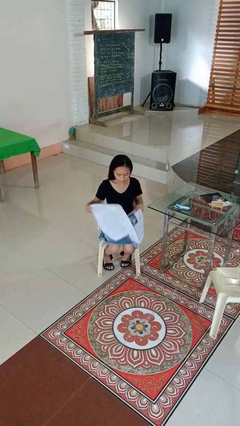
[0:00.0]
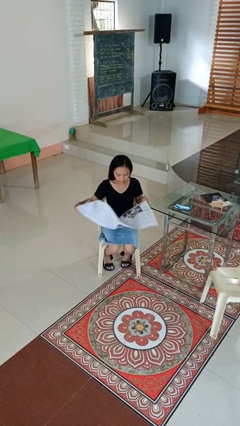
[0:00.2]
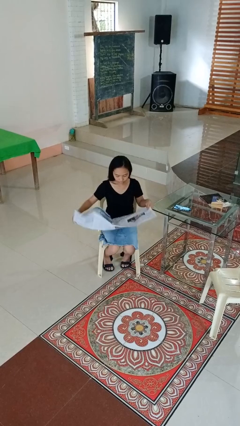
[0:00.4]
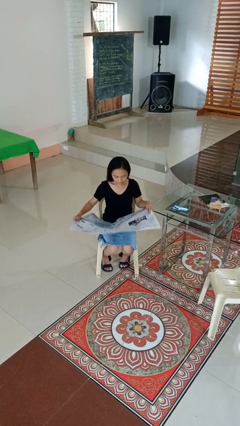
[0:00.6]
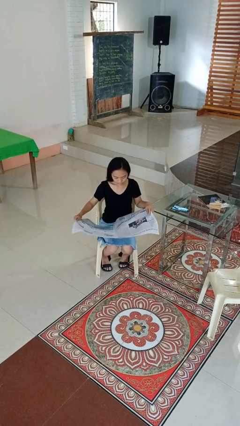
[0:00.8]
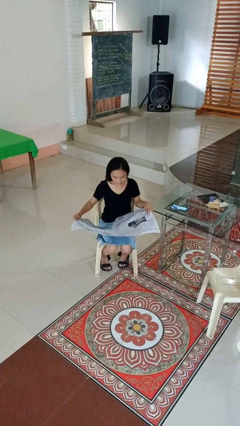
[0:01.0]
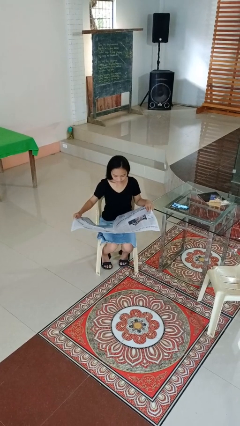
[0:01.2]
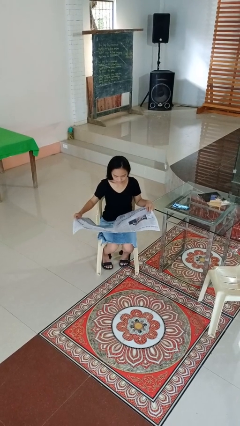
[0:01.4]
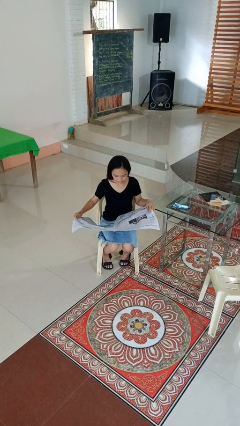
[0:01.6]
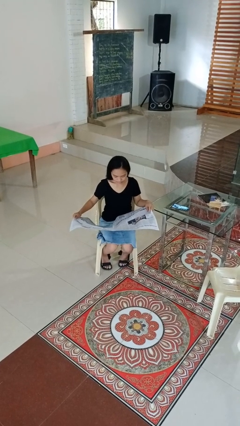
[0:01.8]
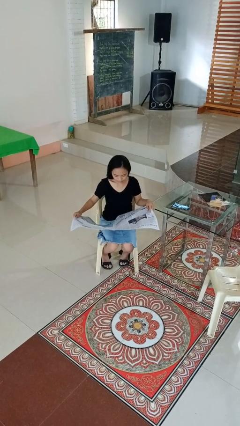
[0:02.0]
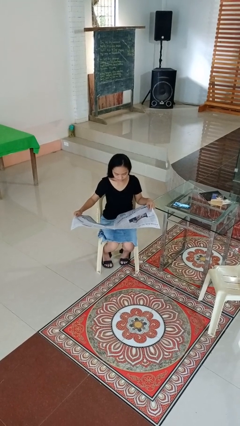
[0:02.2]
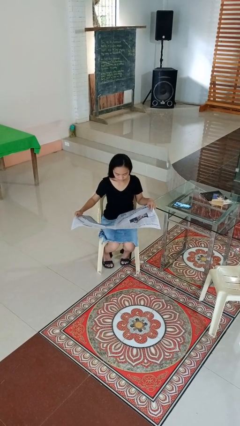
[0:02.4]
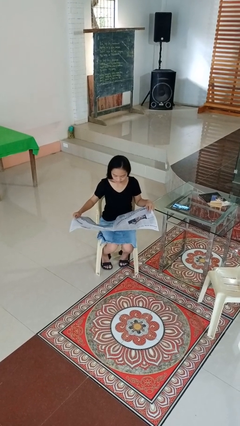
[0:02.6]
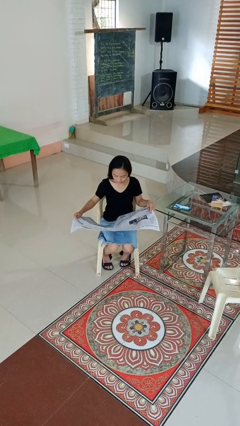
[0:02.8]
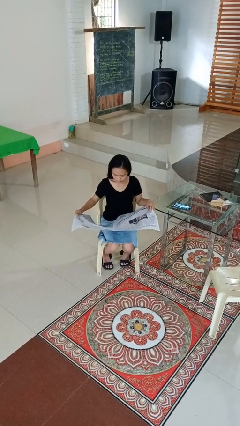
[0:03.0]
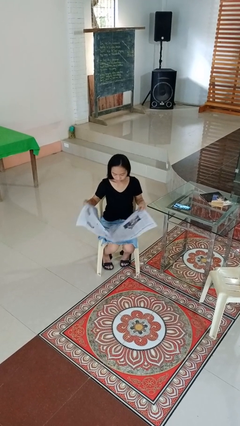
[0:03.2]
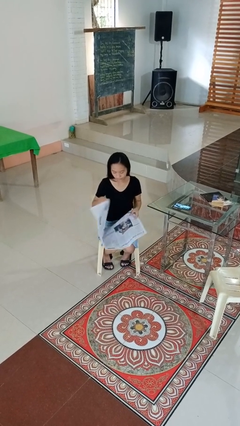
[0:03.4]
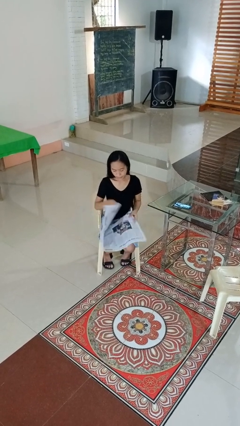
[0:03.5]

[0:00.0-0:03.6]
person reads newspaper

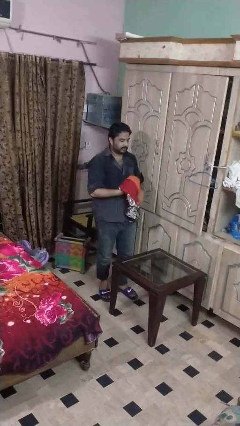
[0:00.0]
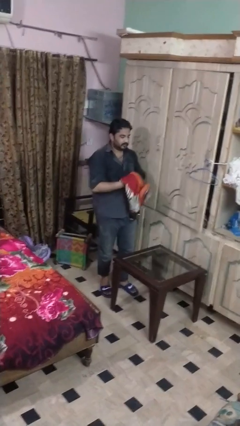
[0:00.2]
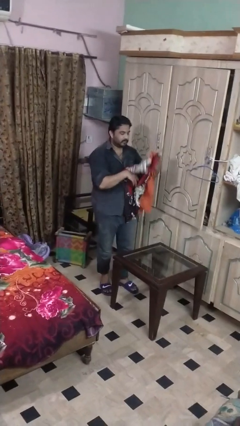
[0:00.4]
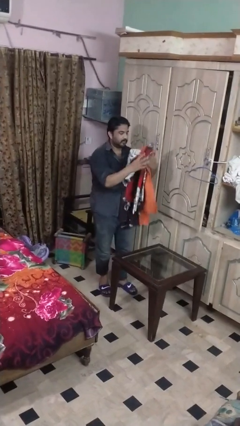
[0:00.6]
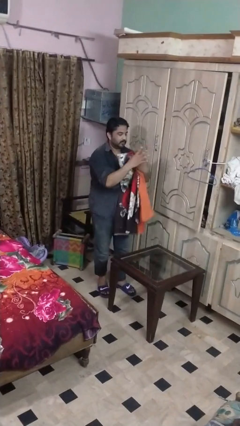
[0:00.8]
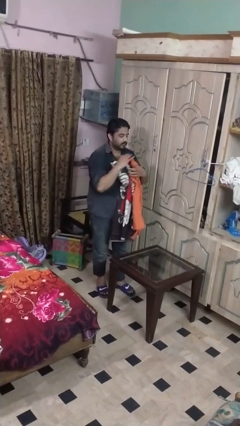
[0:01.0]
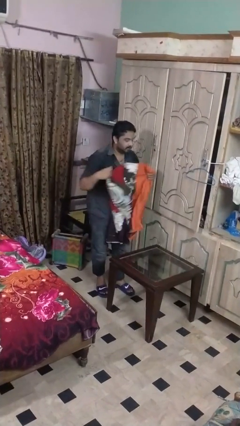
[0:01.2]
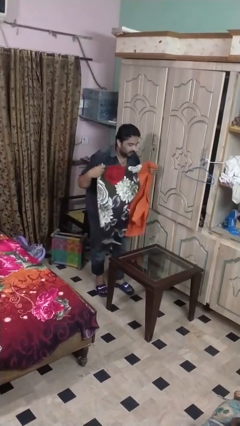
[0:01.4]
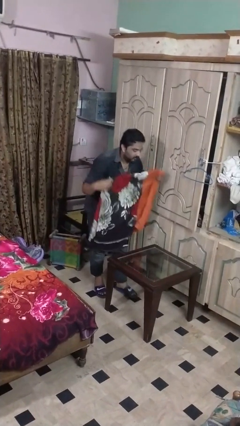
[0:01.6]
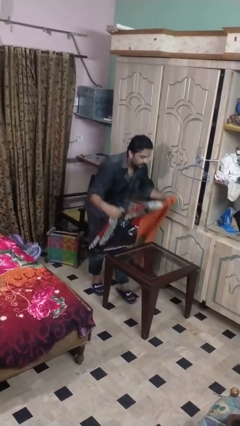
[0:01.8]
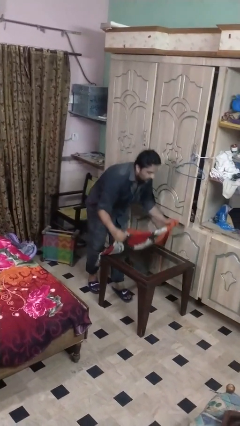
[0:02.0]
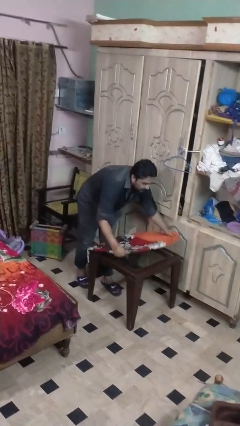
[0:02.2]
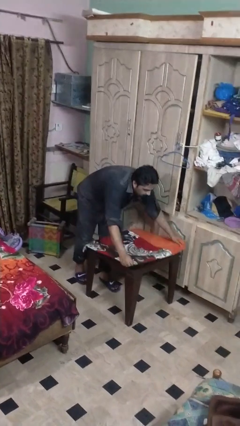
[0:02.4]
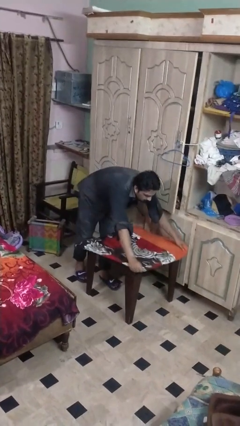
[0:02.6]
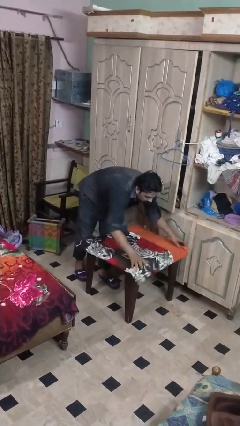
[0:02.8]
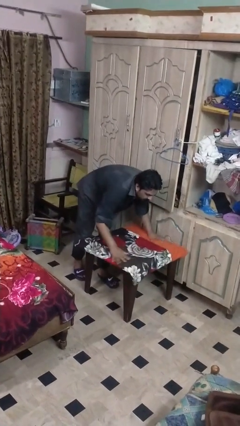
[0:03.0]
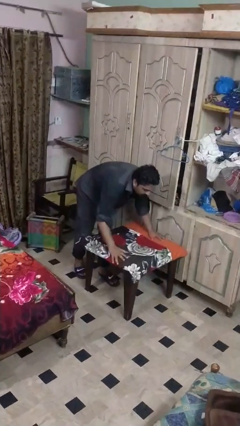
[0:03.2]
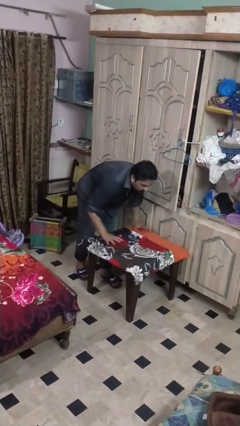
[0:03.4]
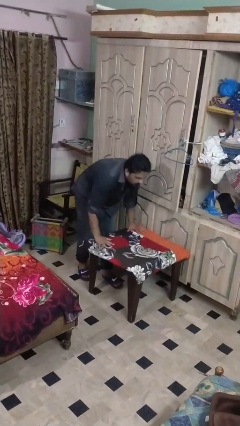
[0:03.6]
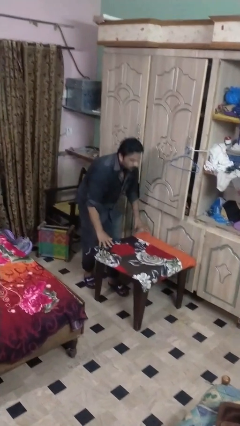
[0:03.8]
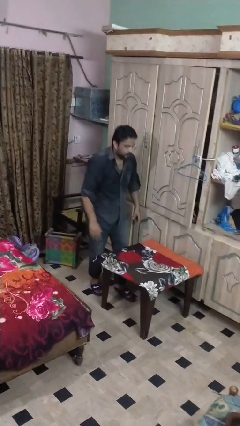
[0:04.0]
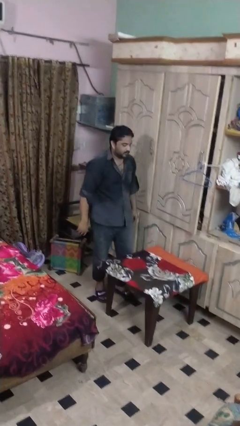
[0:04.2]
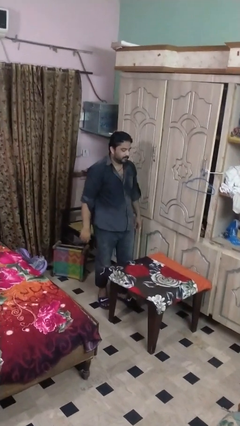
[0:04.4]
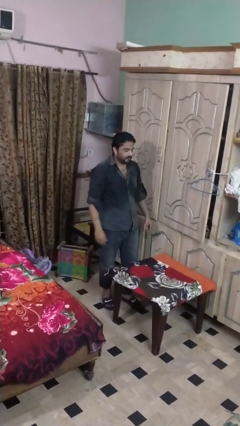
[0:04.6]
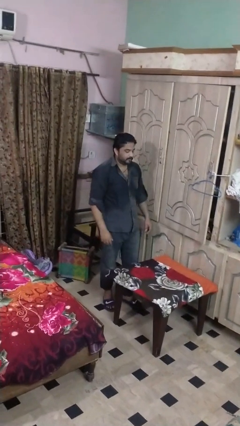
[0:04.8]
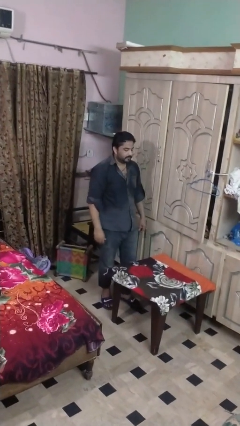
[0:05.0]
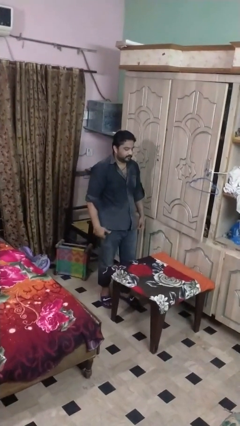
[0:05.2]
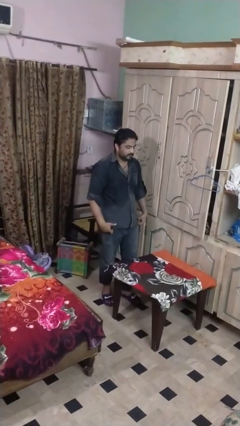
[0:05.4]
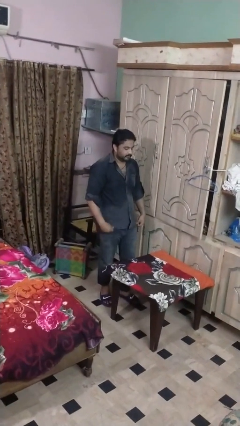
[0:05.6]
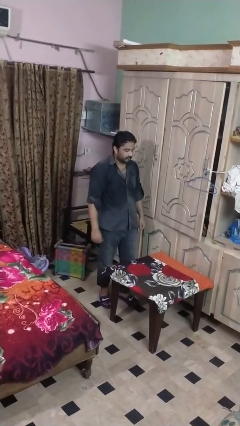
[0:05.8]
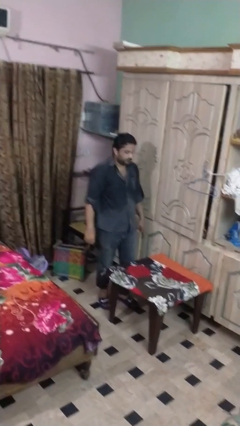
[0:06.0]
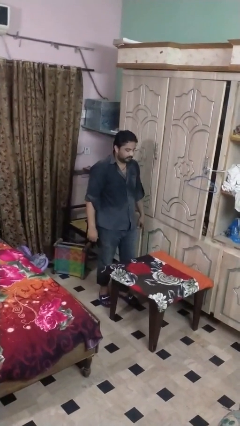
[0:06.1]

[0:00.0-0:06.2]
person spreads tablecloth

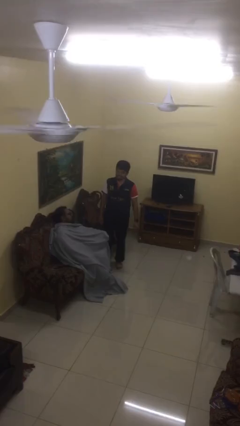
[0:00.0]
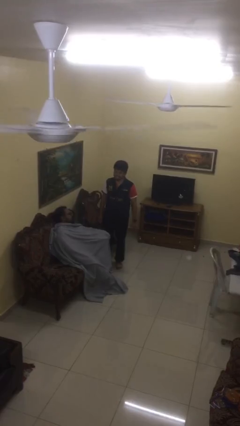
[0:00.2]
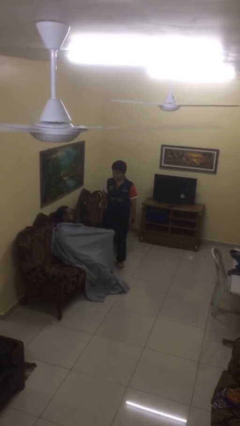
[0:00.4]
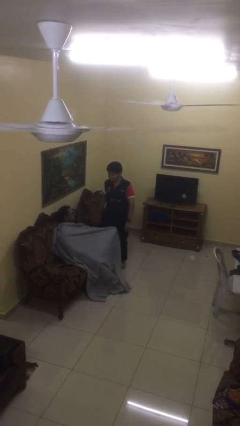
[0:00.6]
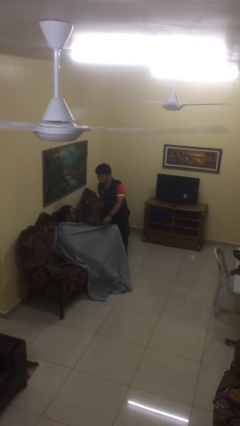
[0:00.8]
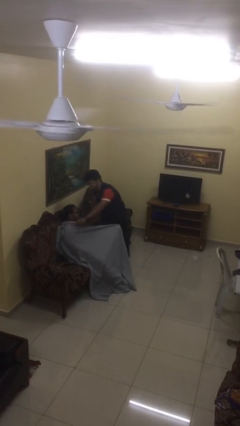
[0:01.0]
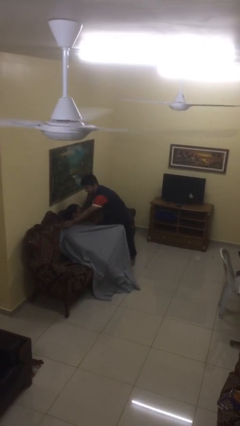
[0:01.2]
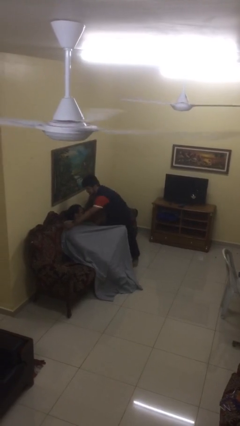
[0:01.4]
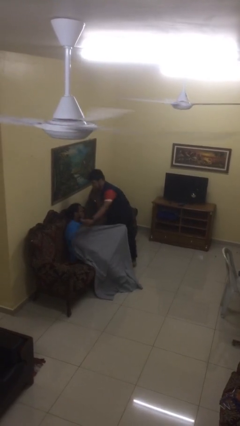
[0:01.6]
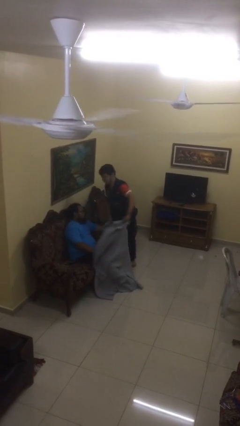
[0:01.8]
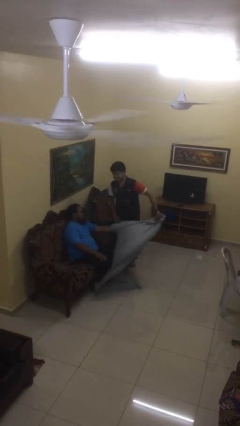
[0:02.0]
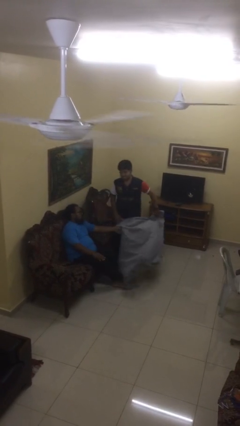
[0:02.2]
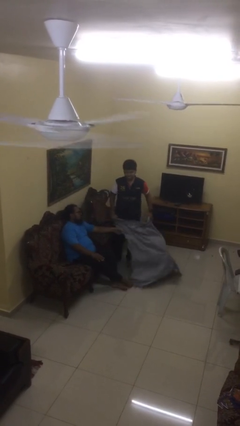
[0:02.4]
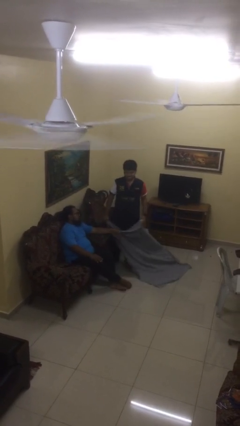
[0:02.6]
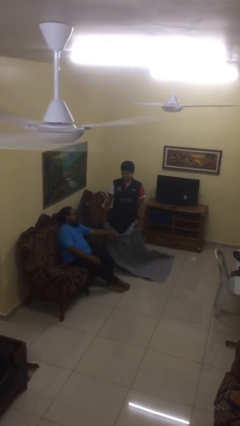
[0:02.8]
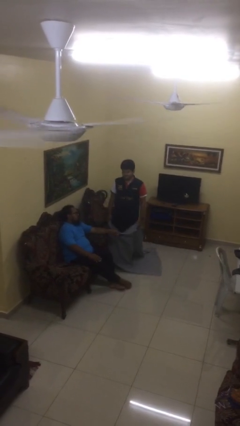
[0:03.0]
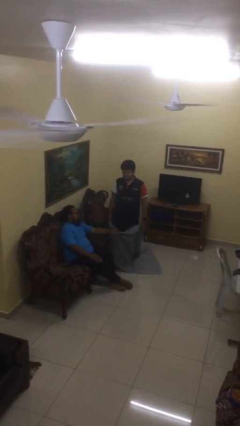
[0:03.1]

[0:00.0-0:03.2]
person uncovers friend with blanket

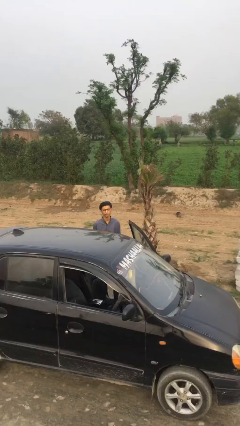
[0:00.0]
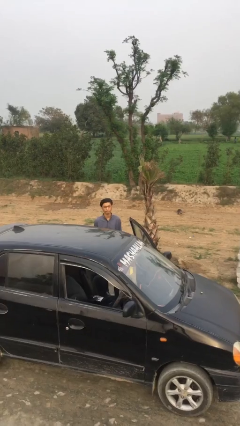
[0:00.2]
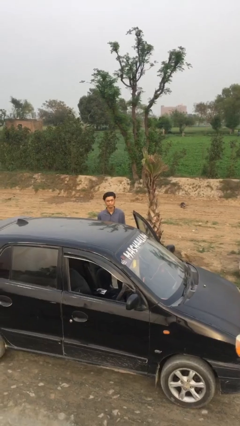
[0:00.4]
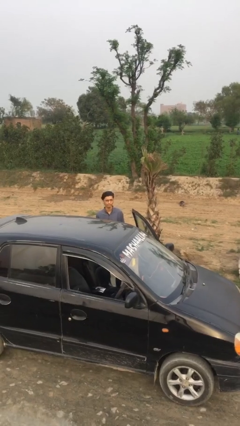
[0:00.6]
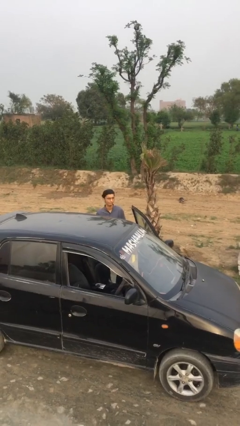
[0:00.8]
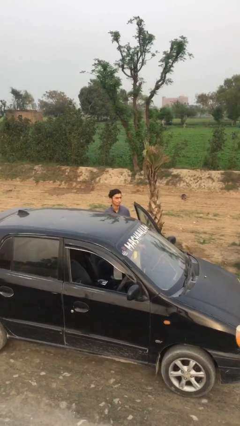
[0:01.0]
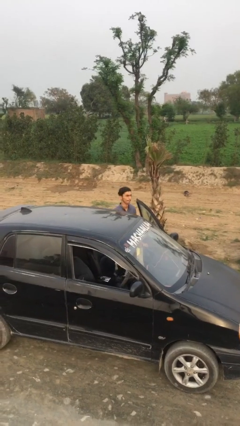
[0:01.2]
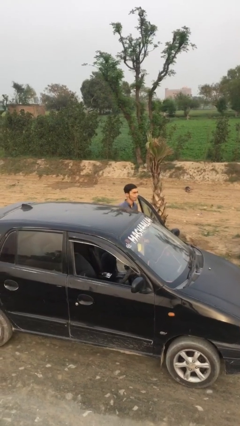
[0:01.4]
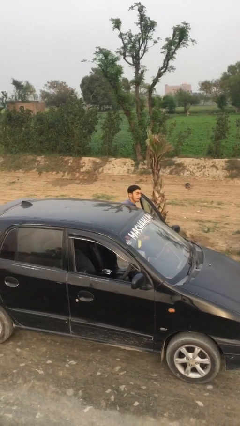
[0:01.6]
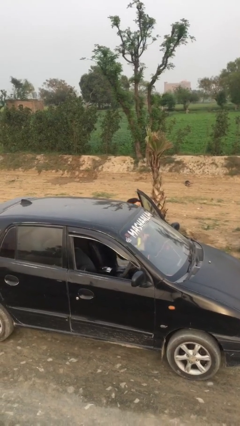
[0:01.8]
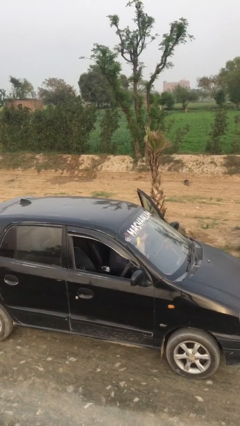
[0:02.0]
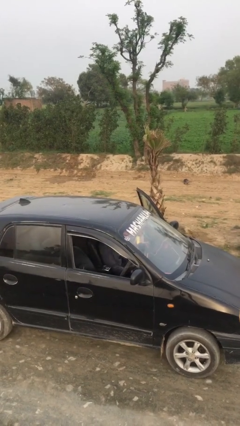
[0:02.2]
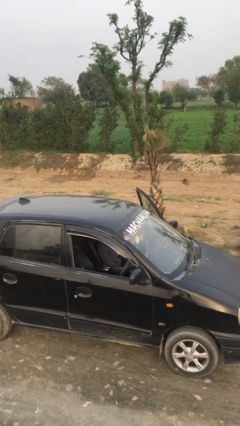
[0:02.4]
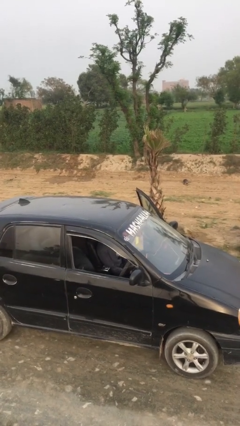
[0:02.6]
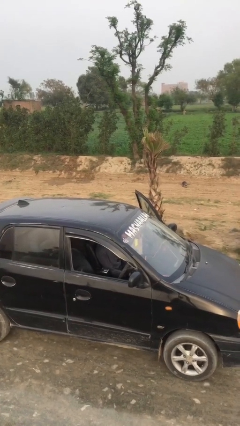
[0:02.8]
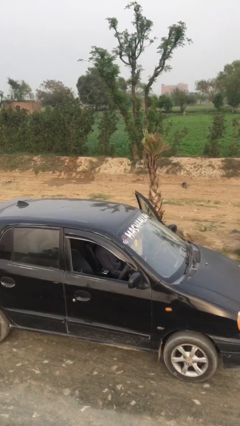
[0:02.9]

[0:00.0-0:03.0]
person enters car

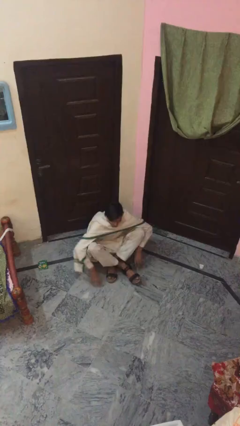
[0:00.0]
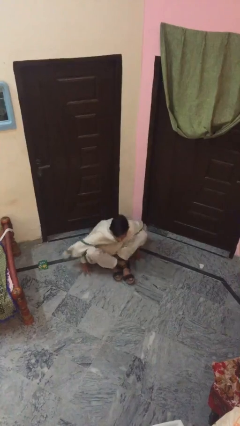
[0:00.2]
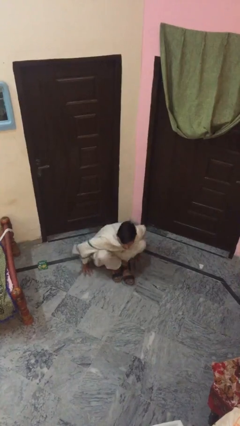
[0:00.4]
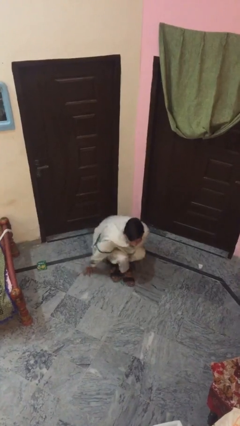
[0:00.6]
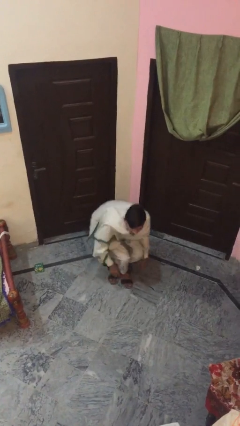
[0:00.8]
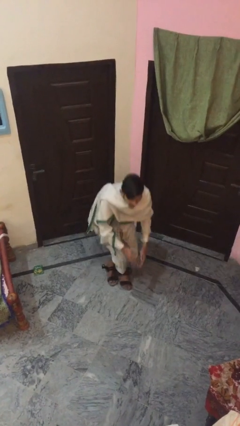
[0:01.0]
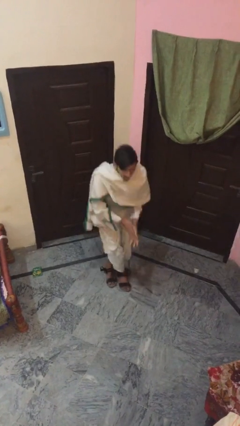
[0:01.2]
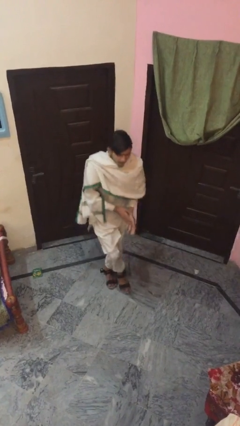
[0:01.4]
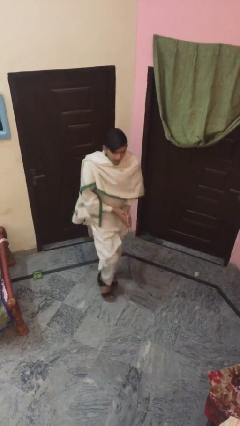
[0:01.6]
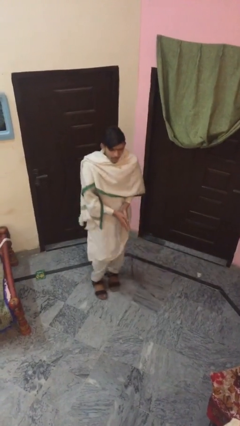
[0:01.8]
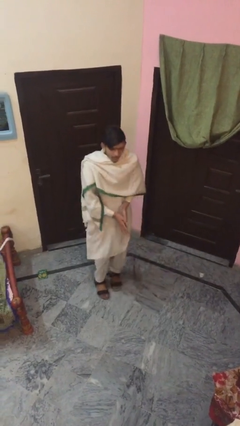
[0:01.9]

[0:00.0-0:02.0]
person stands up
